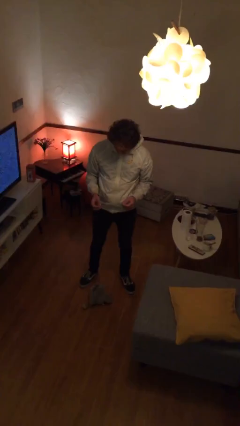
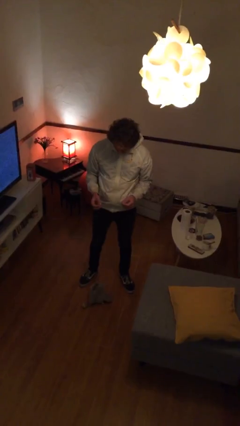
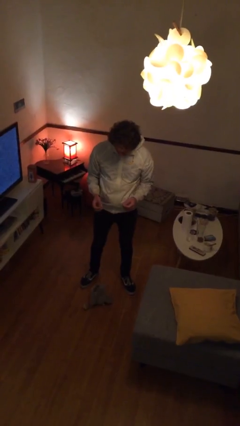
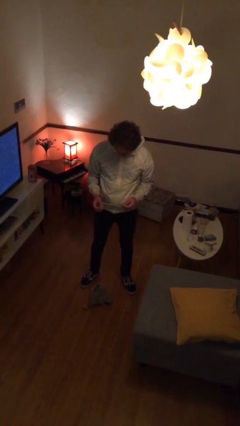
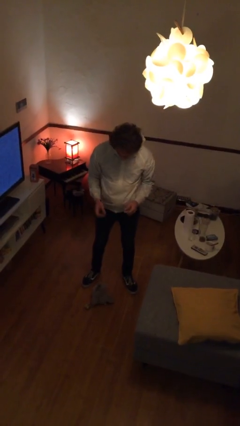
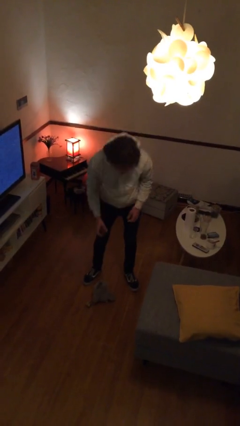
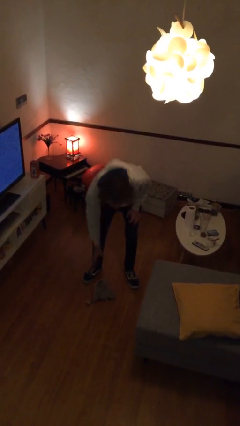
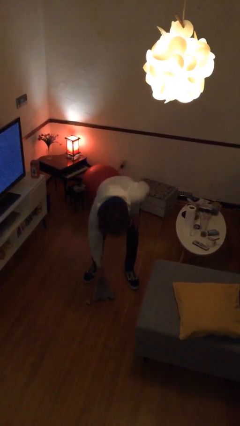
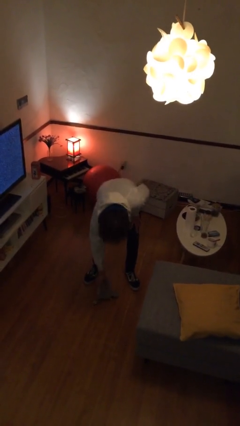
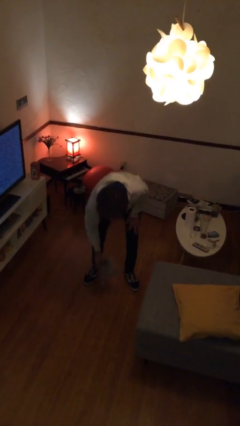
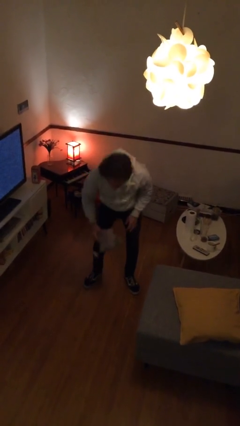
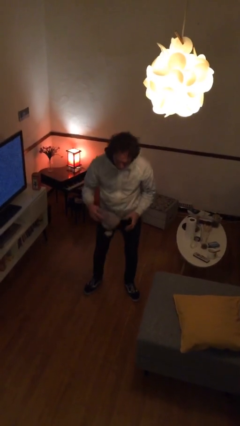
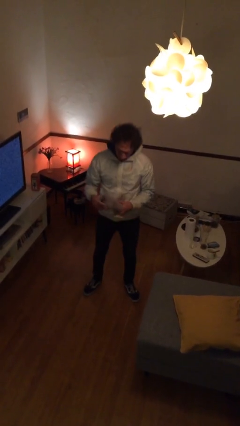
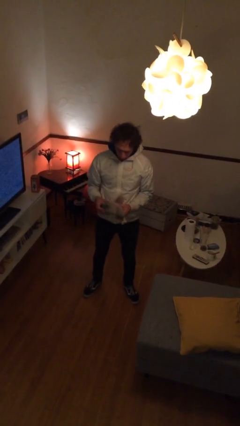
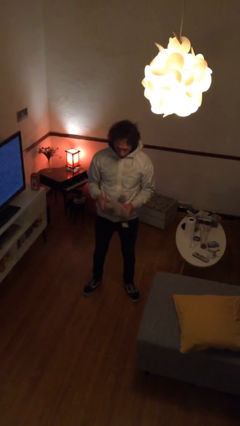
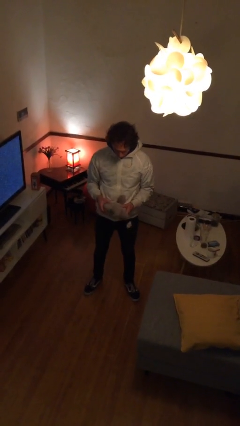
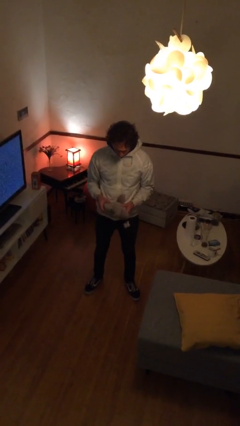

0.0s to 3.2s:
person picks up object from floor

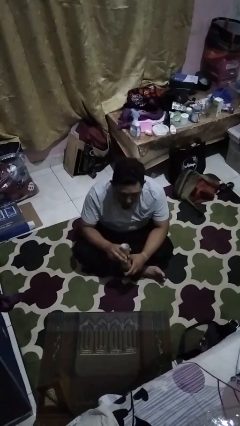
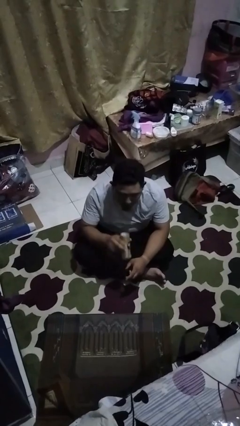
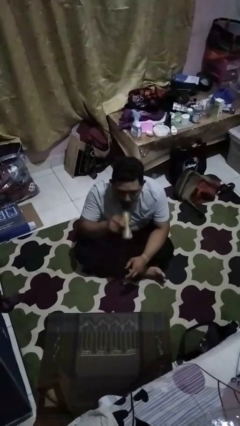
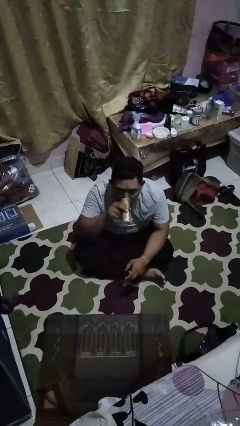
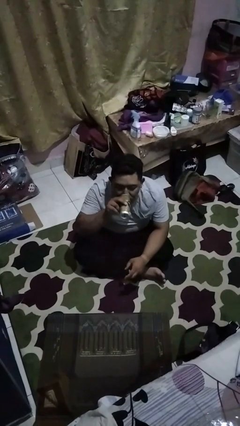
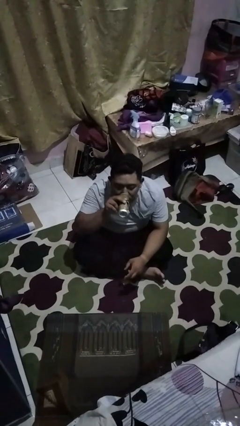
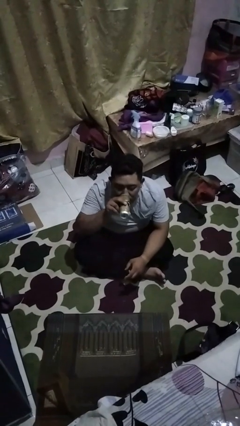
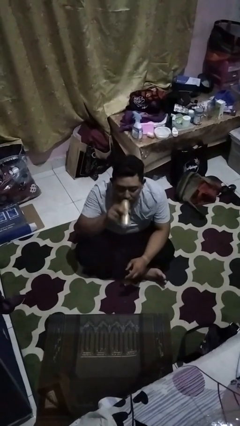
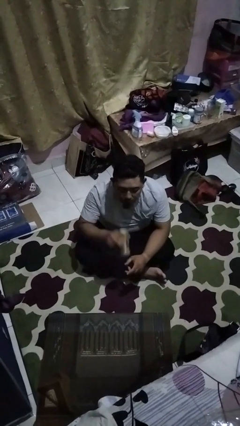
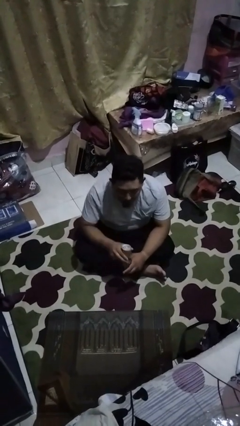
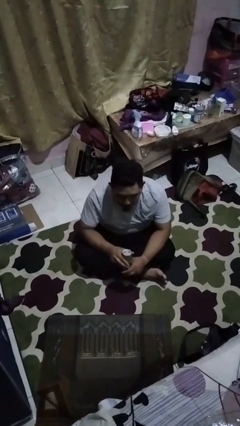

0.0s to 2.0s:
person drinks from beverage can

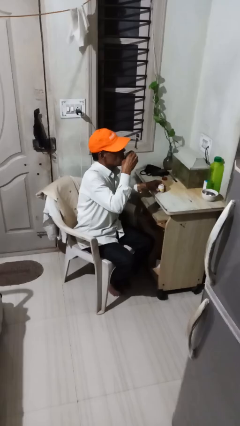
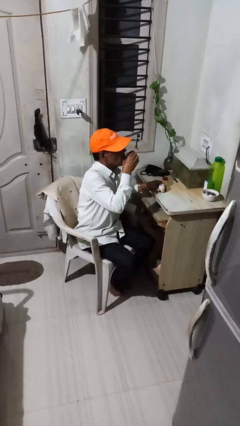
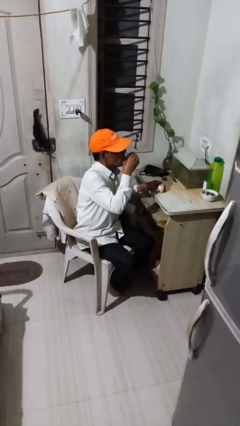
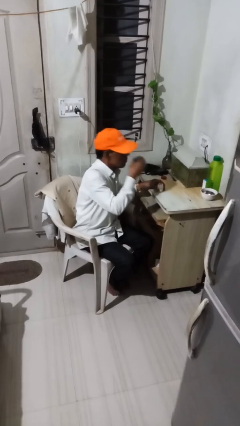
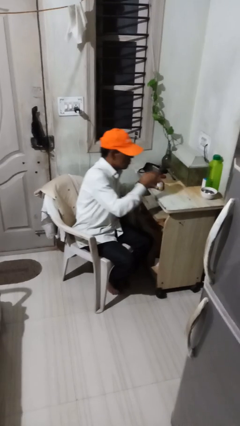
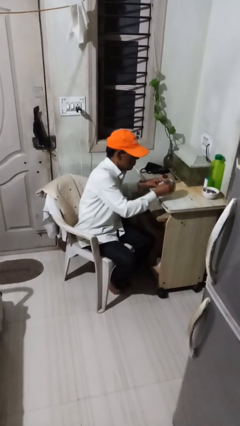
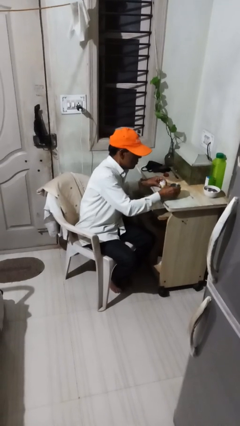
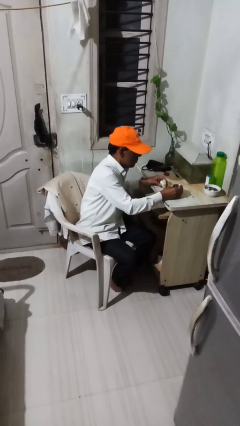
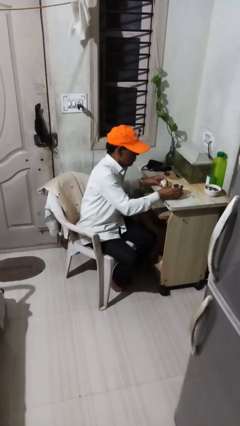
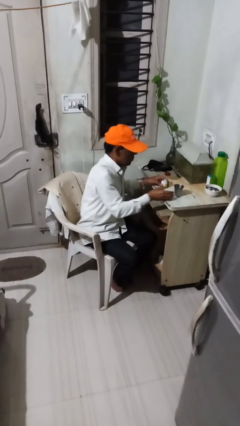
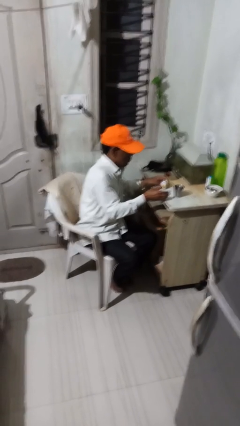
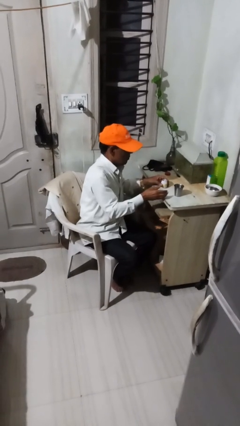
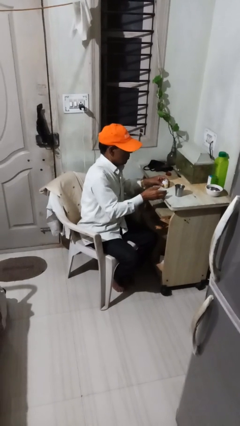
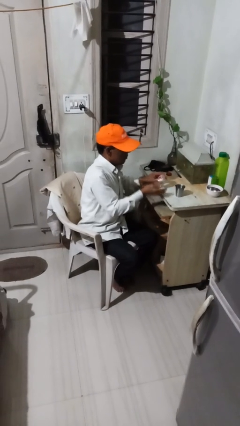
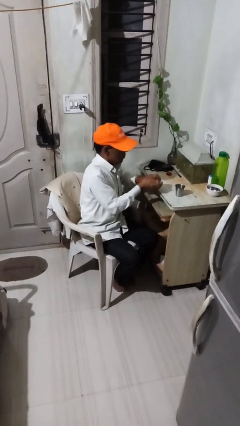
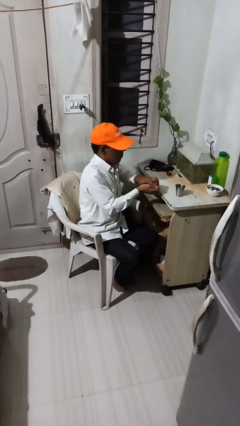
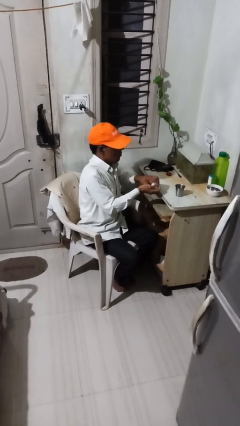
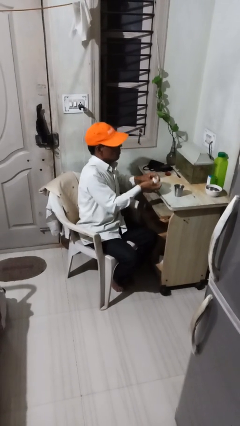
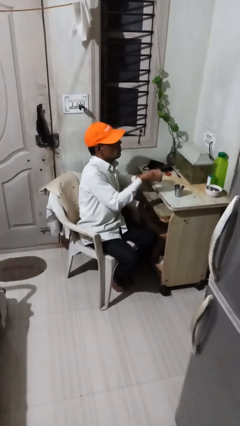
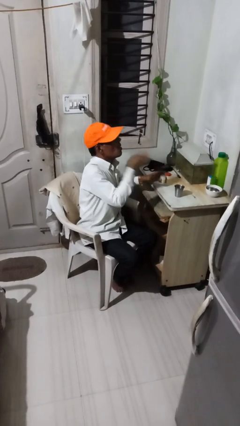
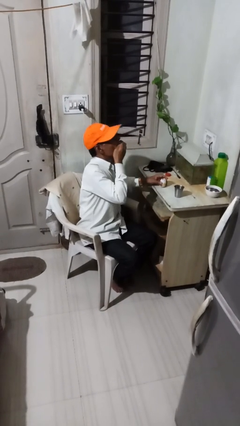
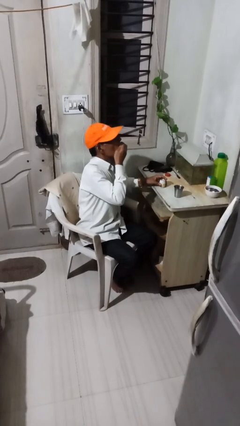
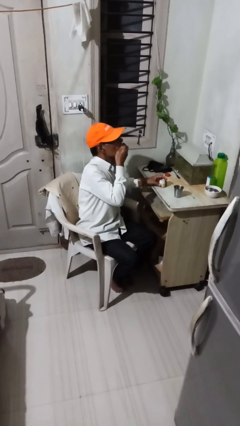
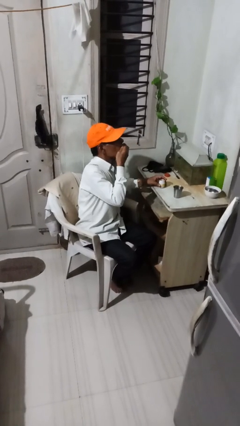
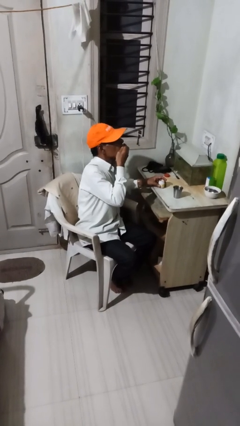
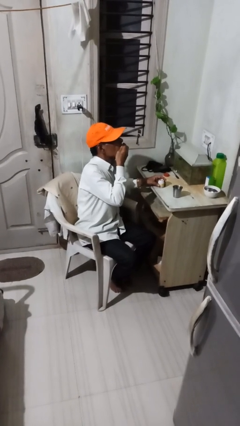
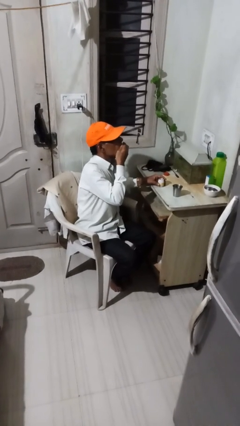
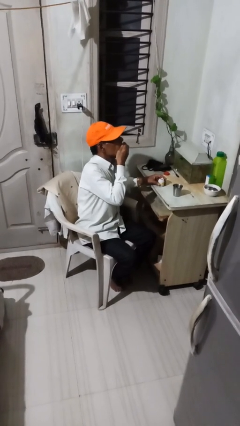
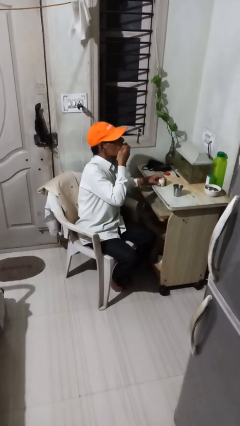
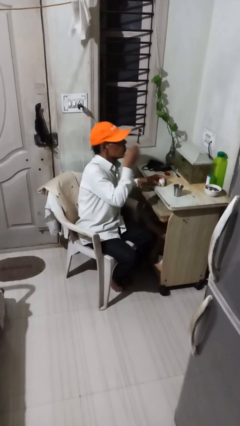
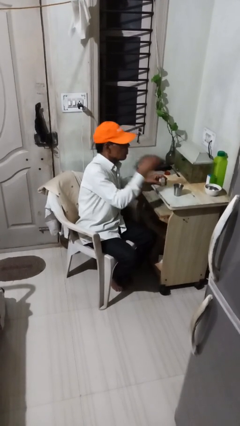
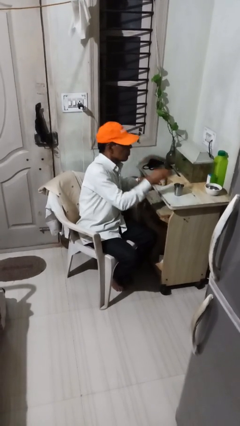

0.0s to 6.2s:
person folds socks

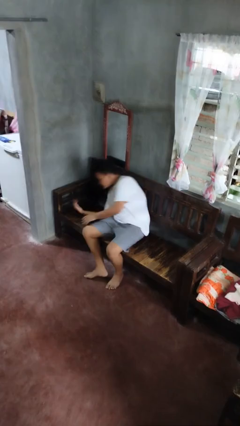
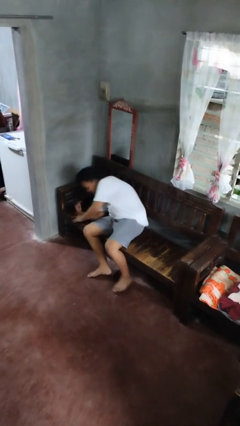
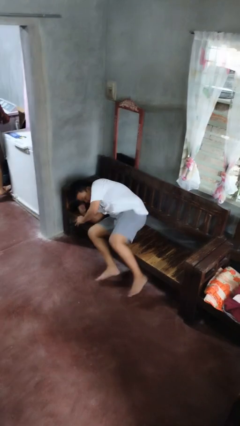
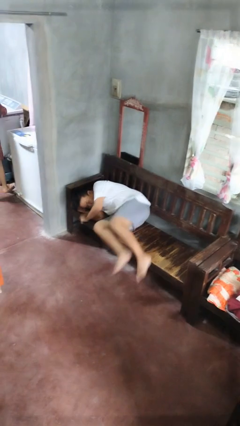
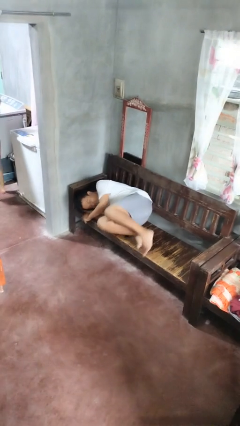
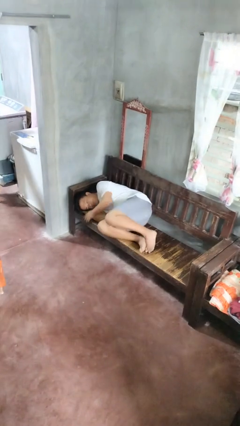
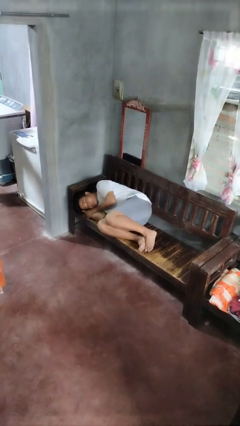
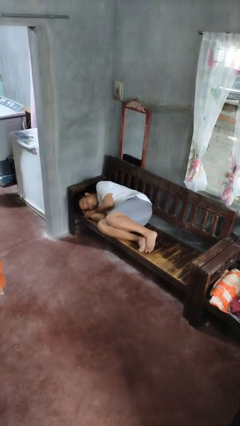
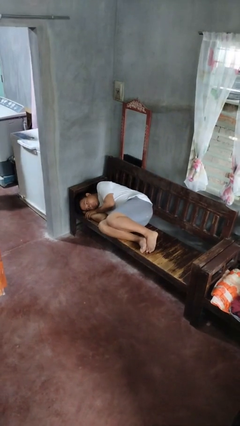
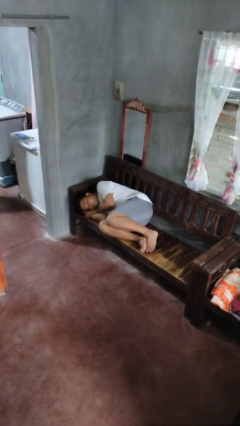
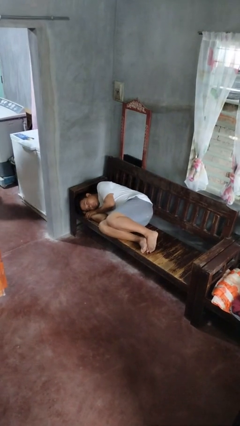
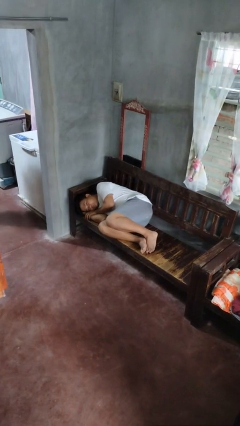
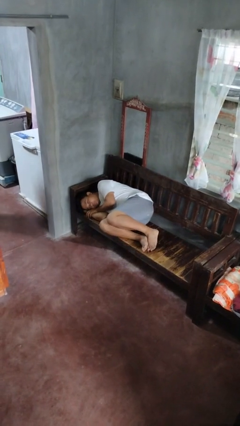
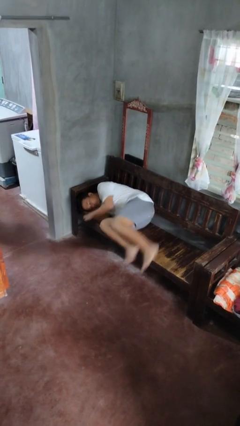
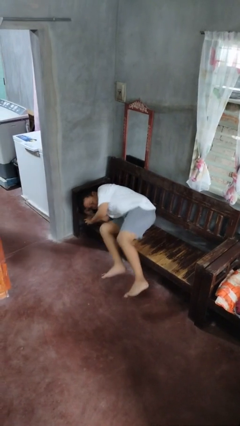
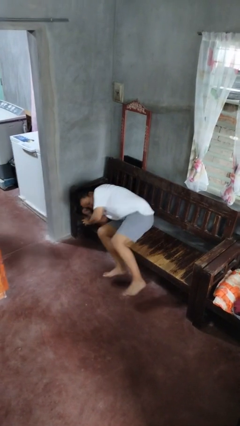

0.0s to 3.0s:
person lies down on couch

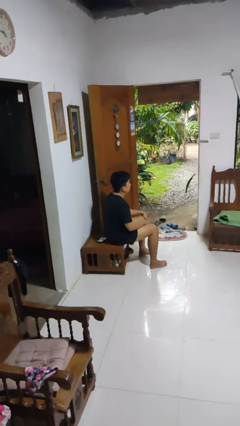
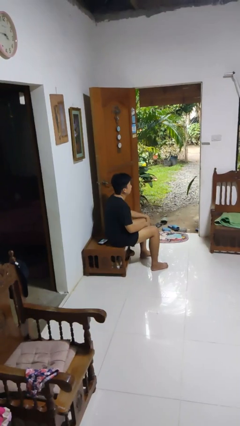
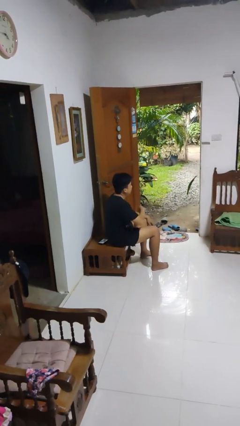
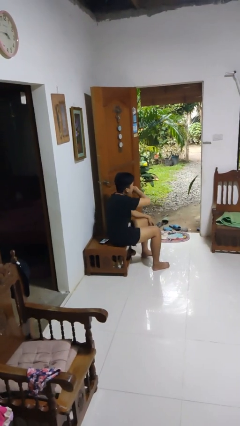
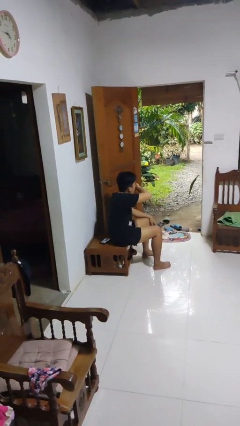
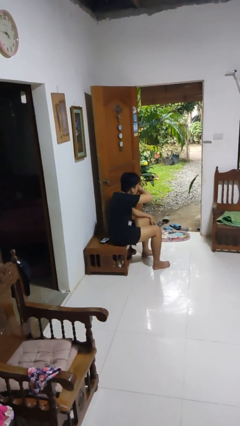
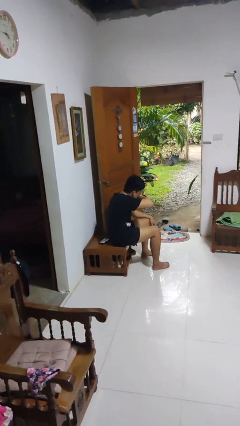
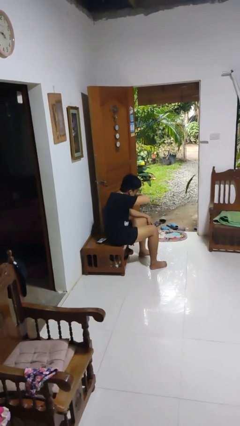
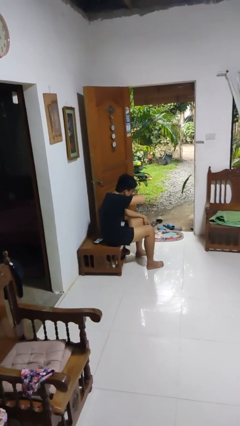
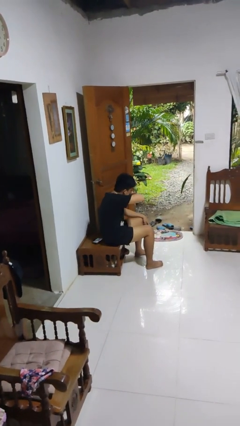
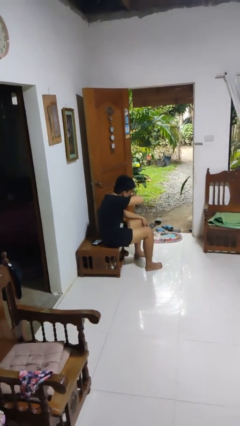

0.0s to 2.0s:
person sneezes into arm

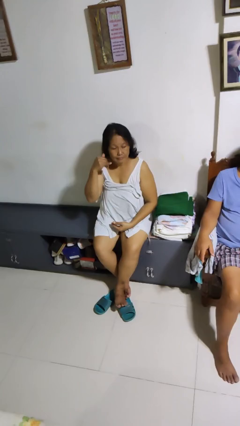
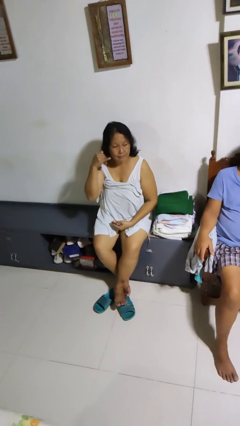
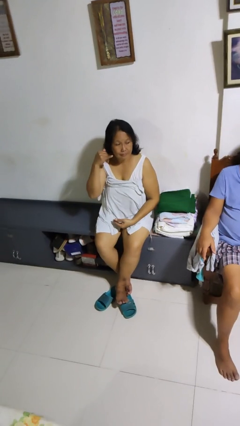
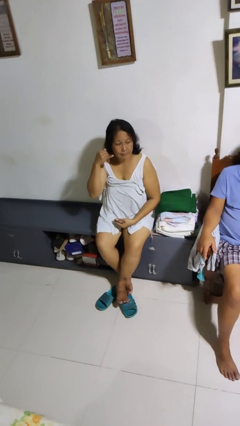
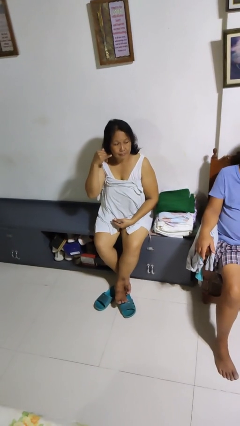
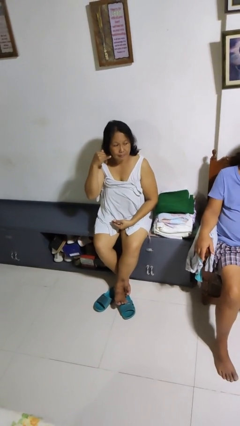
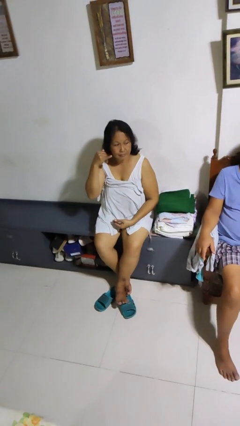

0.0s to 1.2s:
person gestures call me
